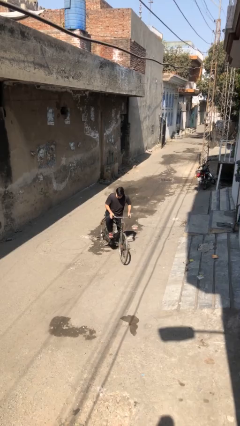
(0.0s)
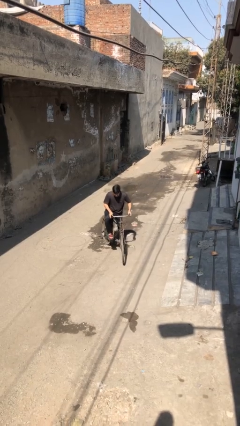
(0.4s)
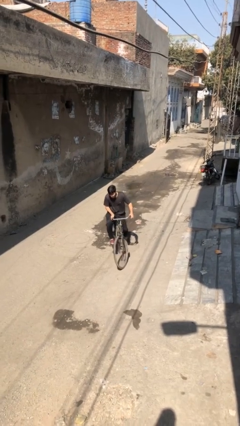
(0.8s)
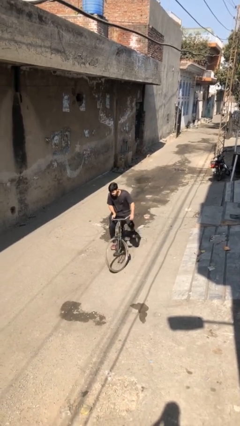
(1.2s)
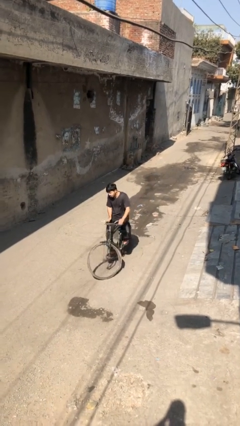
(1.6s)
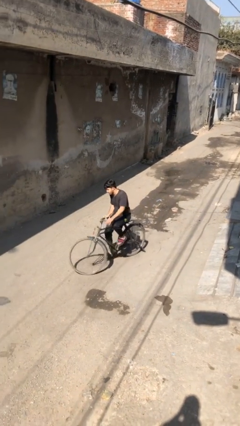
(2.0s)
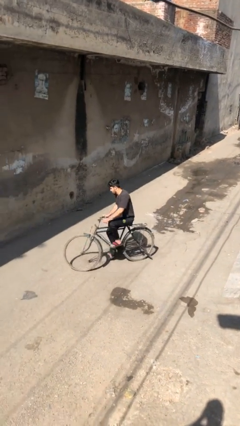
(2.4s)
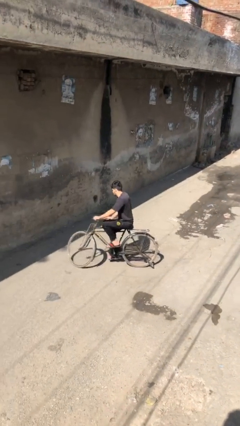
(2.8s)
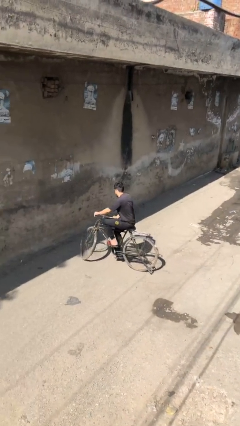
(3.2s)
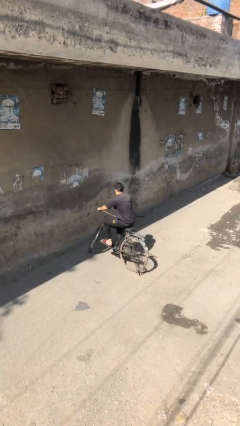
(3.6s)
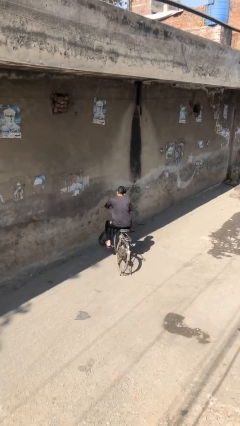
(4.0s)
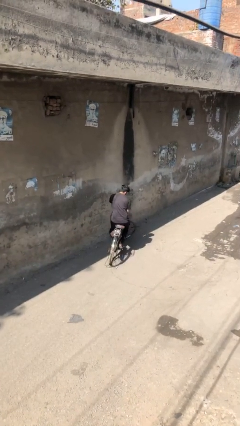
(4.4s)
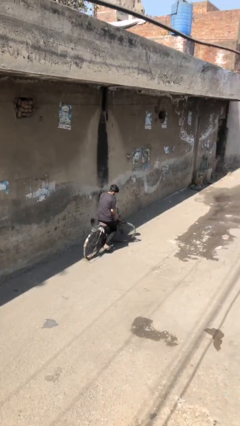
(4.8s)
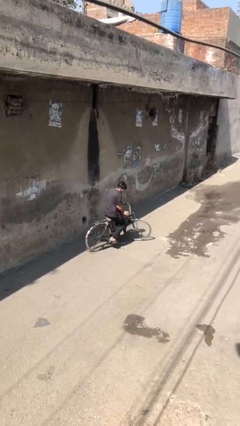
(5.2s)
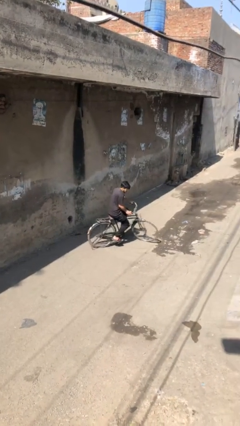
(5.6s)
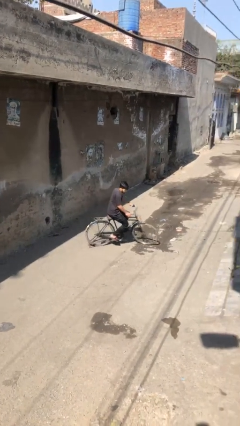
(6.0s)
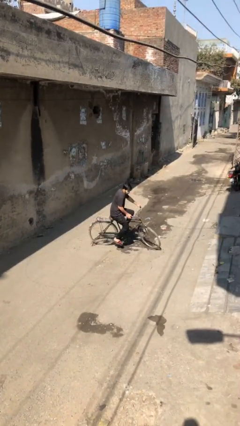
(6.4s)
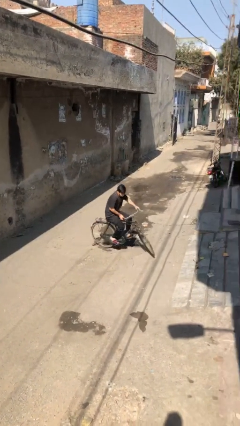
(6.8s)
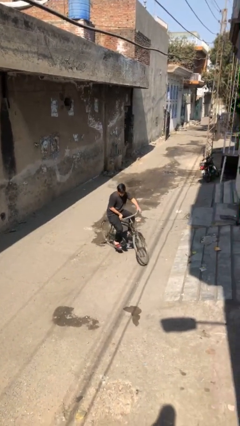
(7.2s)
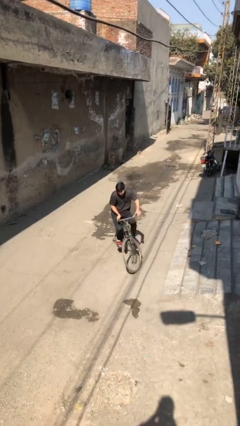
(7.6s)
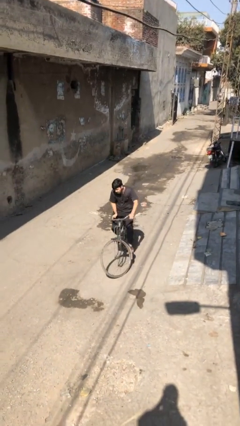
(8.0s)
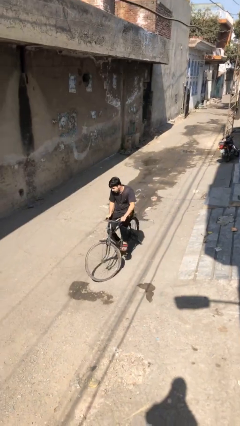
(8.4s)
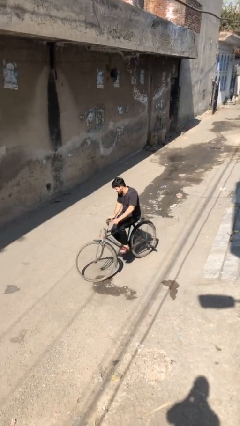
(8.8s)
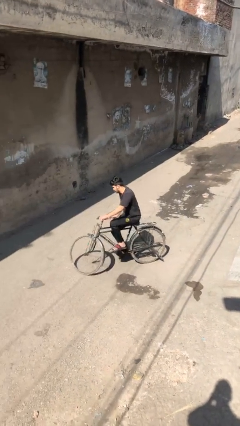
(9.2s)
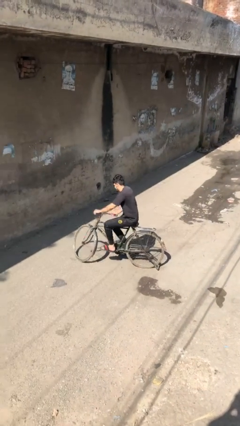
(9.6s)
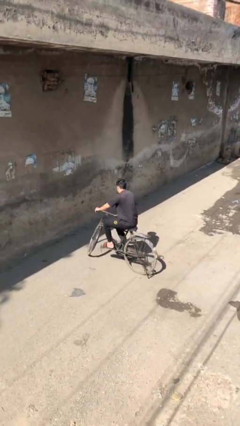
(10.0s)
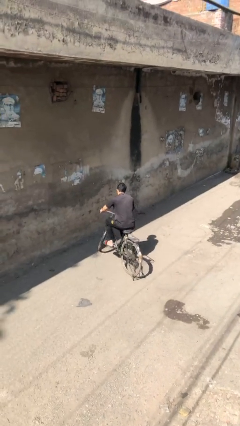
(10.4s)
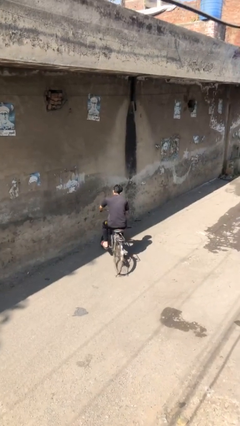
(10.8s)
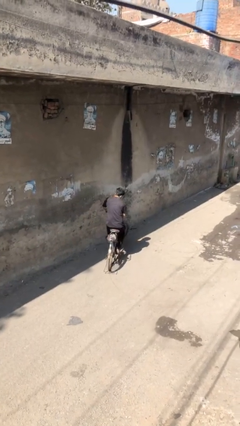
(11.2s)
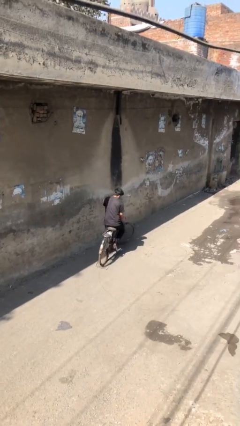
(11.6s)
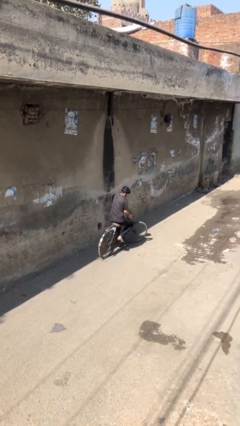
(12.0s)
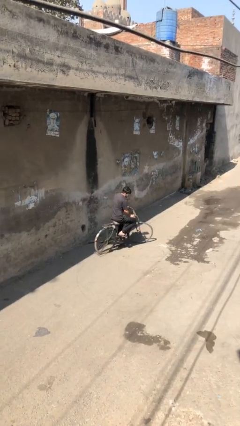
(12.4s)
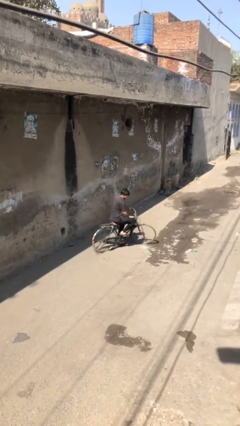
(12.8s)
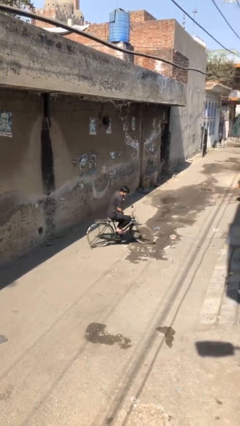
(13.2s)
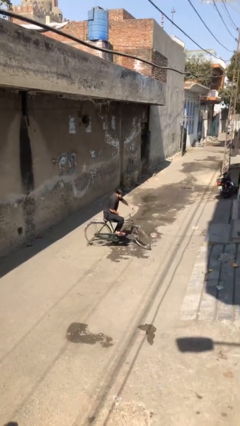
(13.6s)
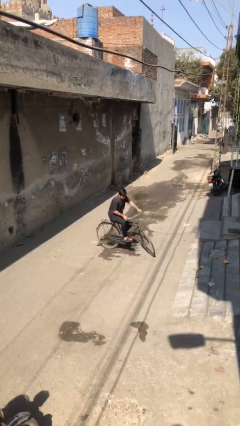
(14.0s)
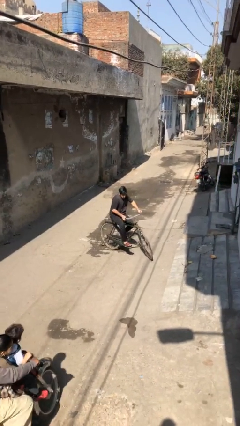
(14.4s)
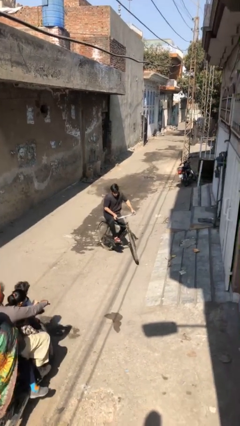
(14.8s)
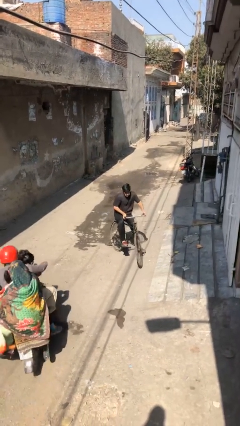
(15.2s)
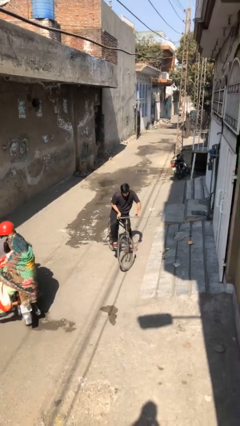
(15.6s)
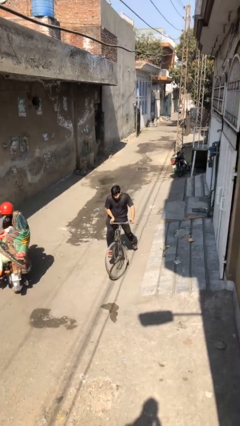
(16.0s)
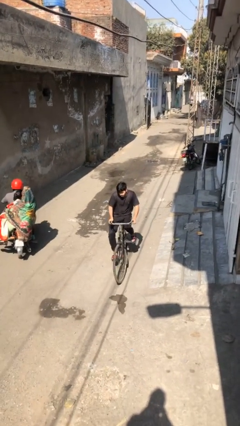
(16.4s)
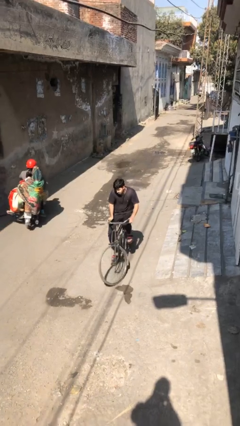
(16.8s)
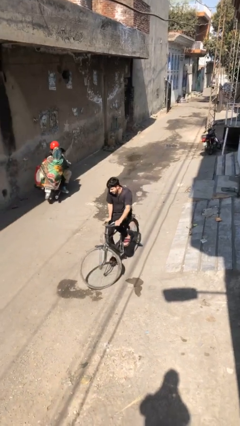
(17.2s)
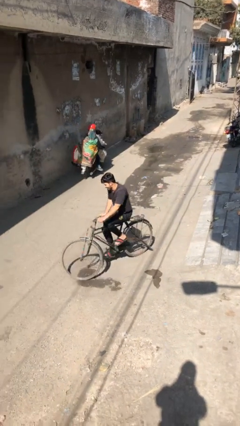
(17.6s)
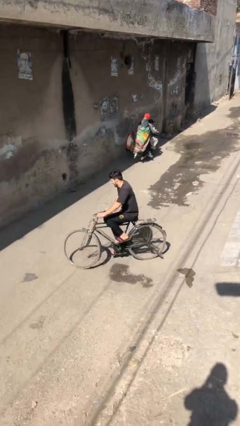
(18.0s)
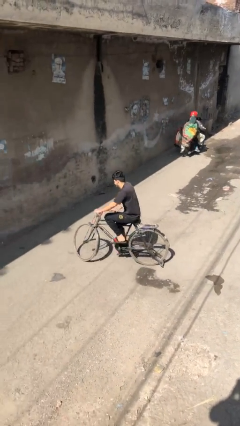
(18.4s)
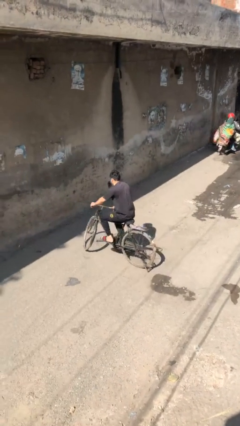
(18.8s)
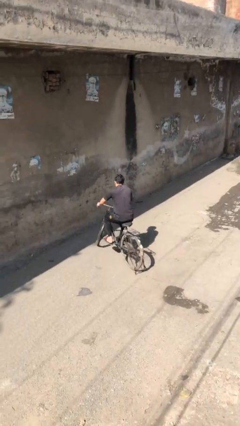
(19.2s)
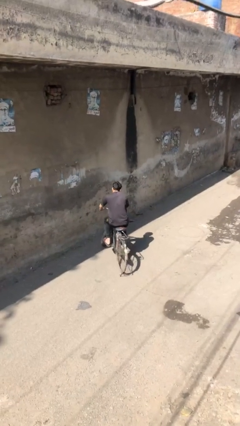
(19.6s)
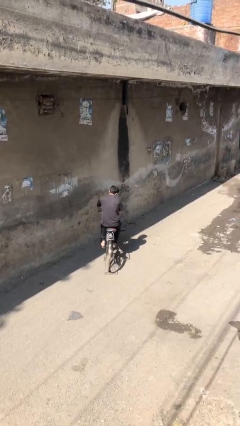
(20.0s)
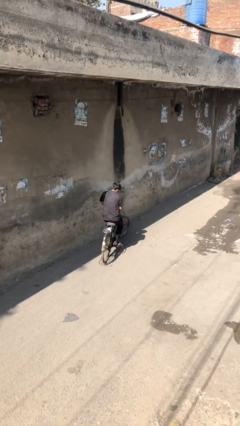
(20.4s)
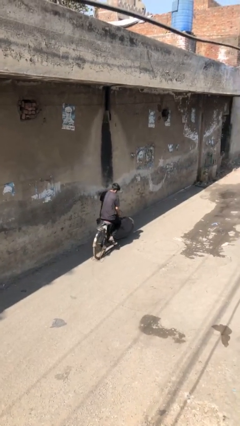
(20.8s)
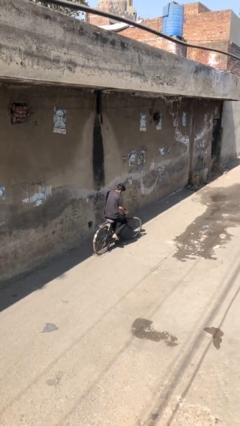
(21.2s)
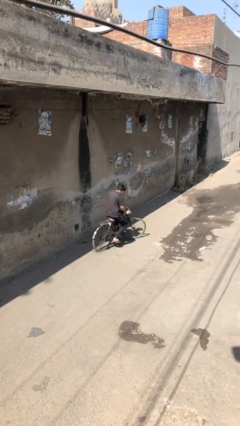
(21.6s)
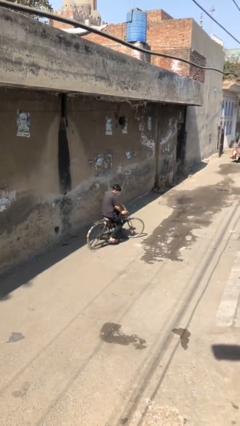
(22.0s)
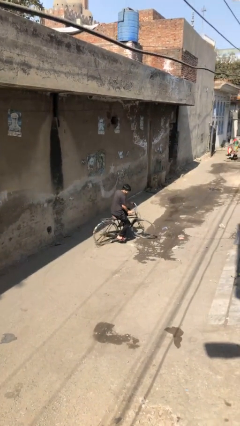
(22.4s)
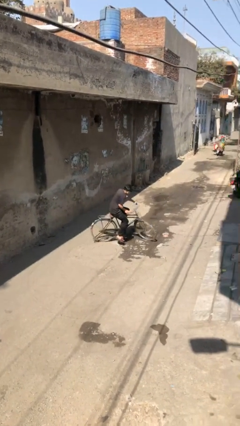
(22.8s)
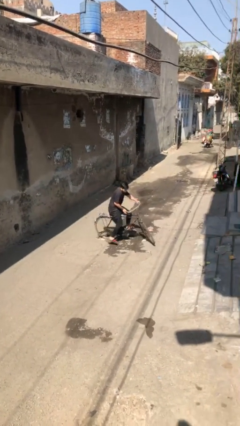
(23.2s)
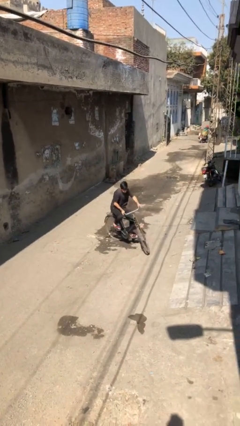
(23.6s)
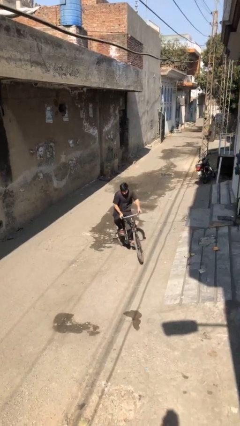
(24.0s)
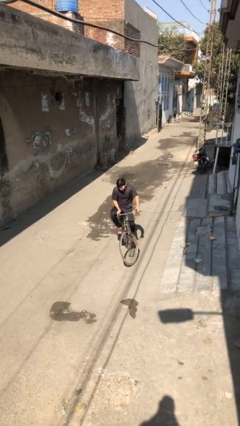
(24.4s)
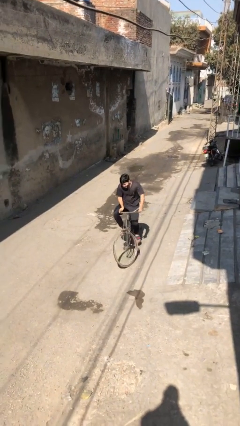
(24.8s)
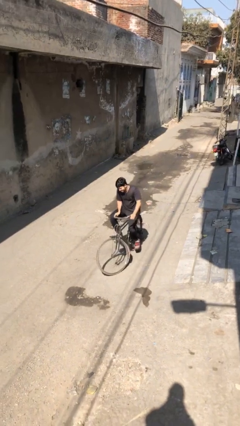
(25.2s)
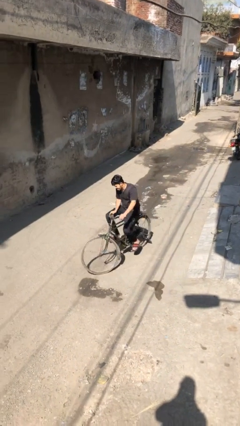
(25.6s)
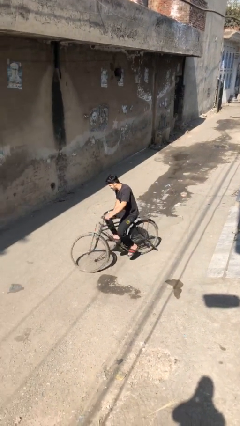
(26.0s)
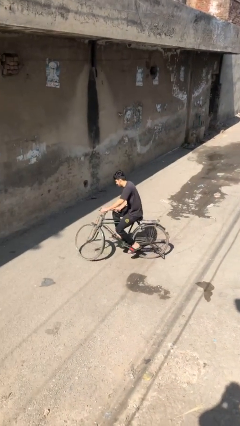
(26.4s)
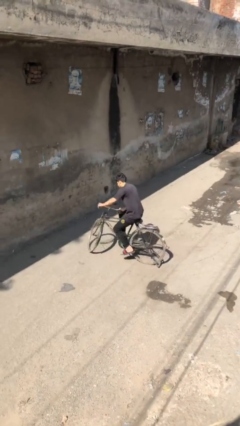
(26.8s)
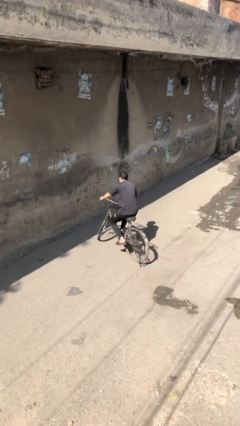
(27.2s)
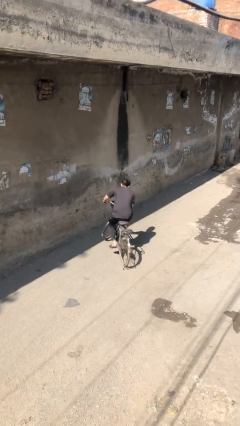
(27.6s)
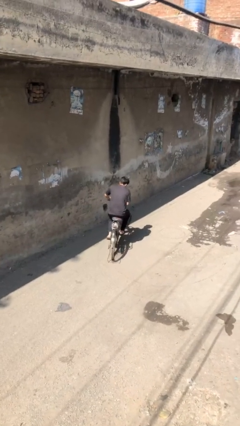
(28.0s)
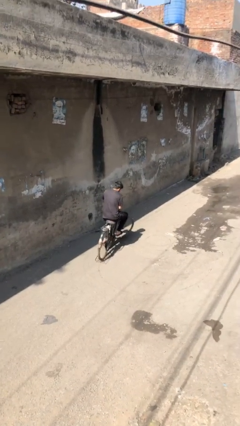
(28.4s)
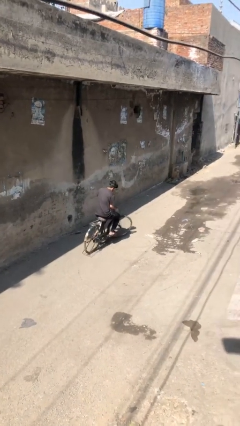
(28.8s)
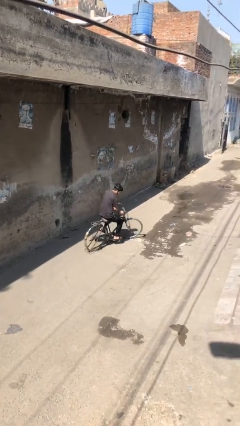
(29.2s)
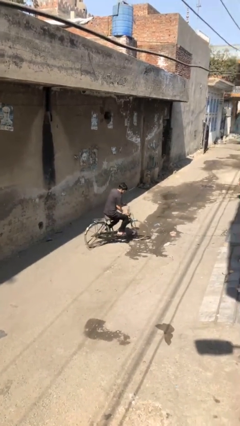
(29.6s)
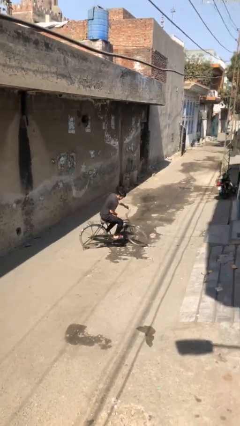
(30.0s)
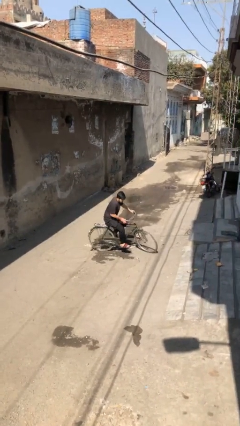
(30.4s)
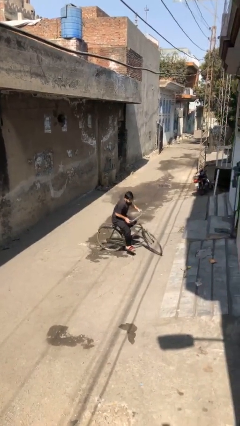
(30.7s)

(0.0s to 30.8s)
person rides bicycle

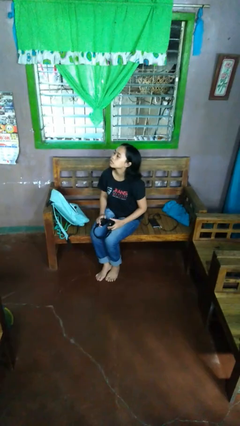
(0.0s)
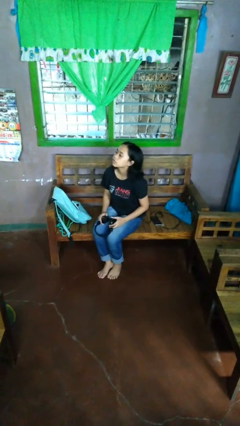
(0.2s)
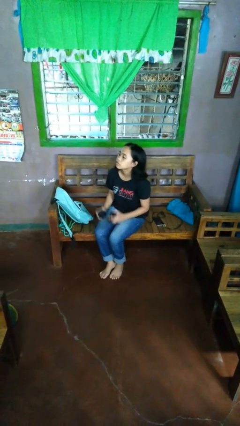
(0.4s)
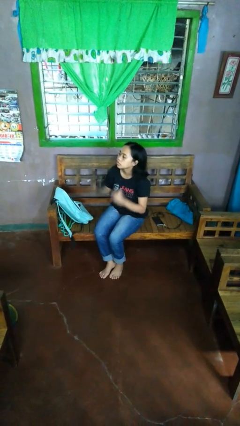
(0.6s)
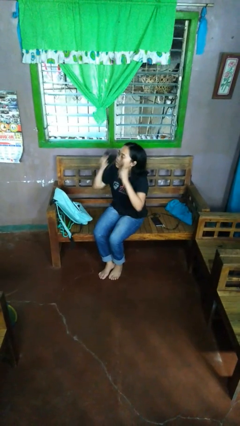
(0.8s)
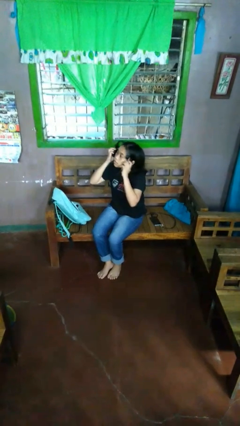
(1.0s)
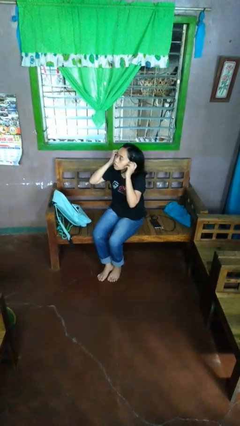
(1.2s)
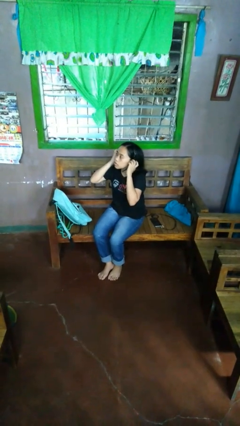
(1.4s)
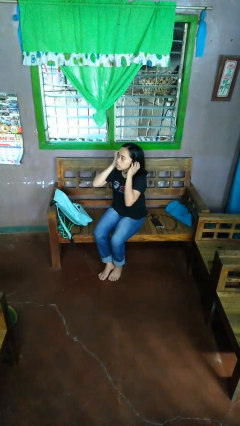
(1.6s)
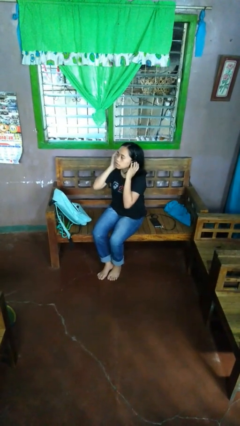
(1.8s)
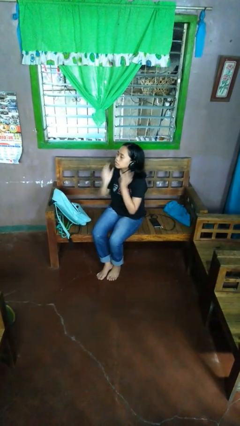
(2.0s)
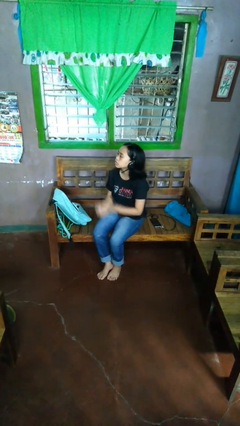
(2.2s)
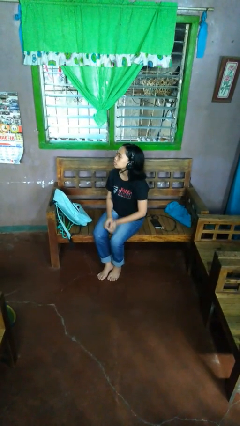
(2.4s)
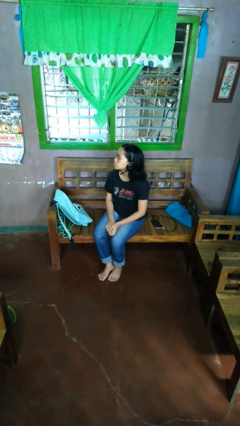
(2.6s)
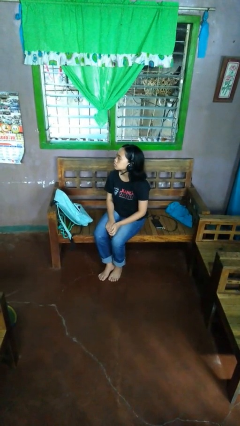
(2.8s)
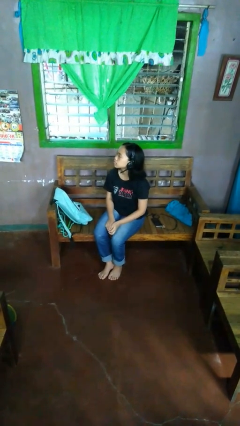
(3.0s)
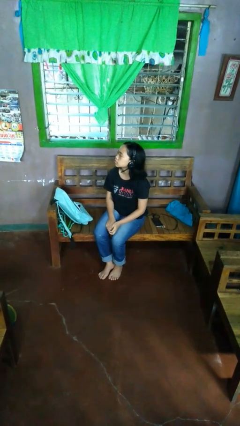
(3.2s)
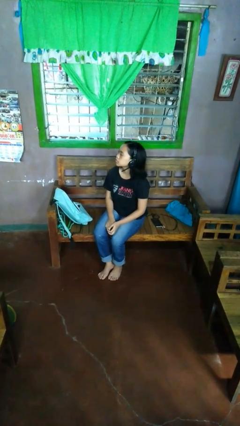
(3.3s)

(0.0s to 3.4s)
person puts on headphones
